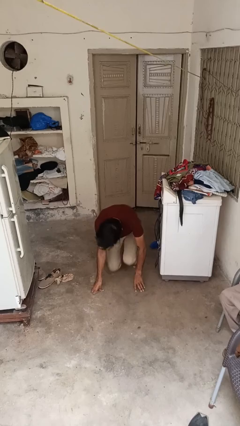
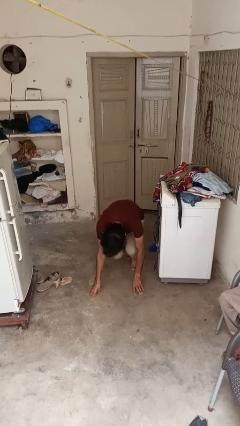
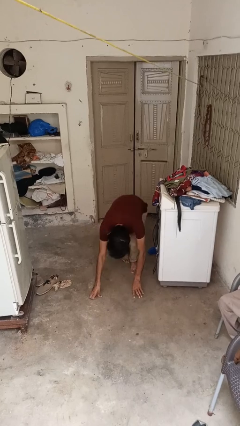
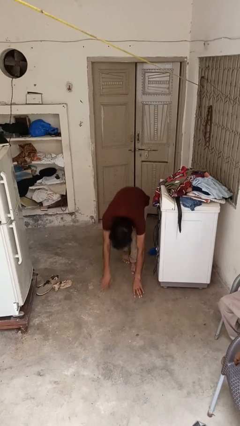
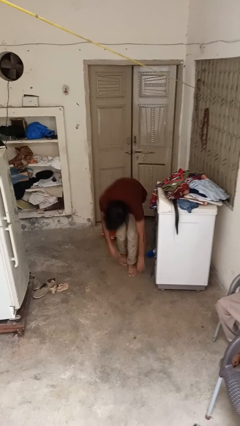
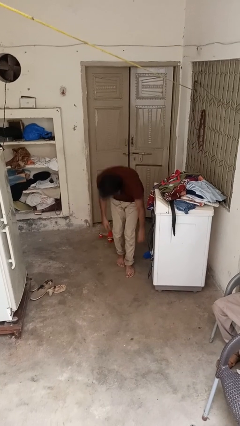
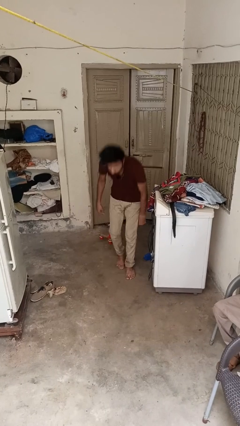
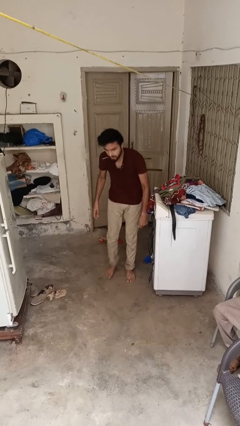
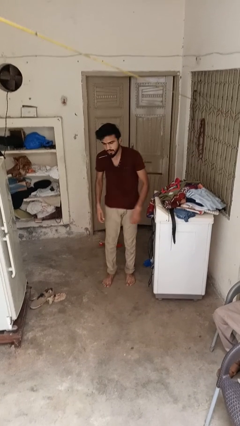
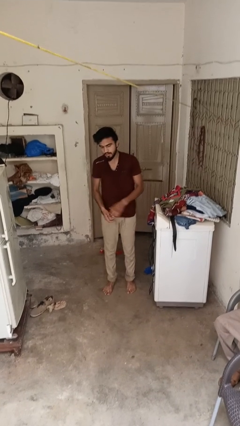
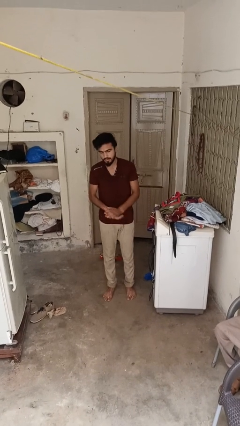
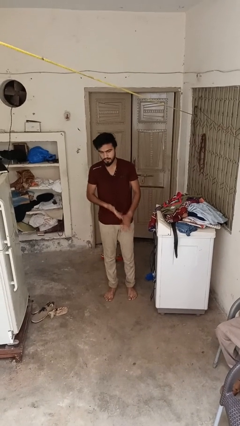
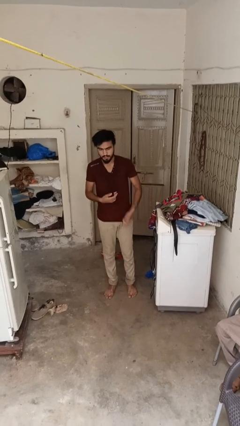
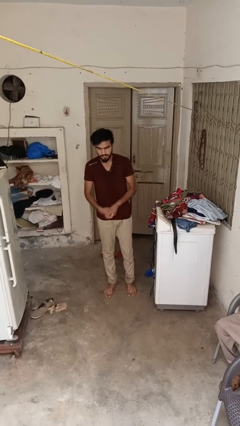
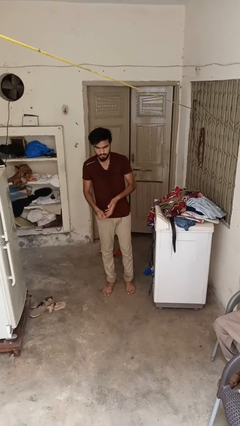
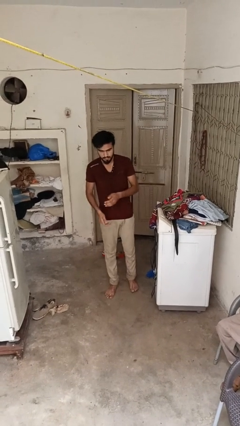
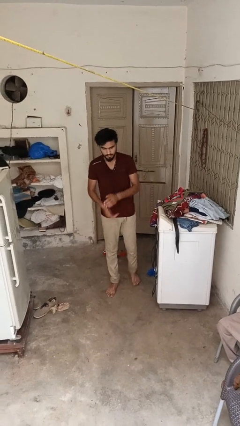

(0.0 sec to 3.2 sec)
person stands up from floor

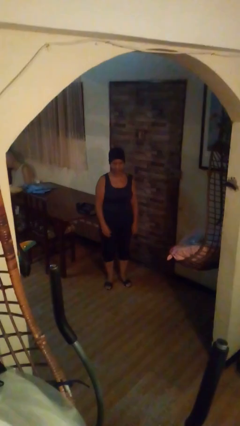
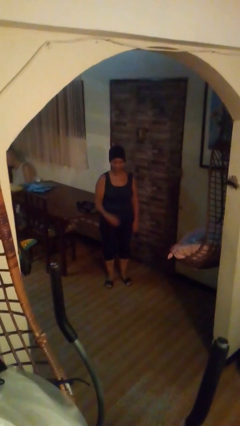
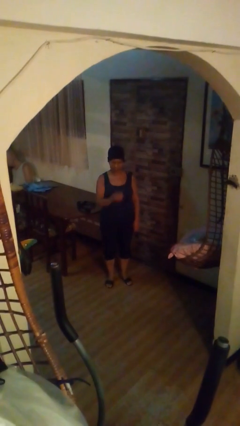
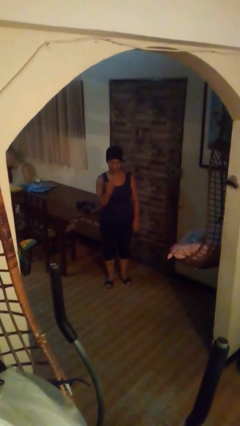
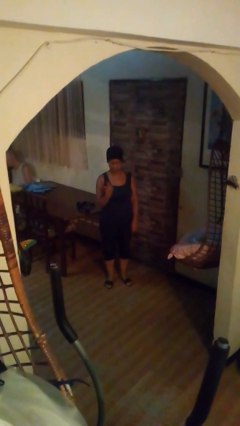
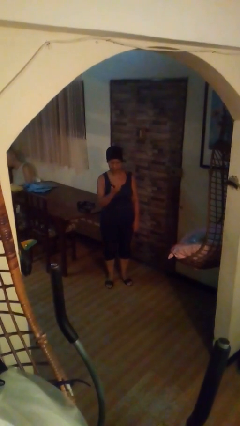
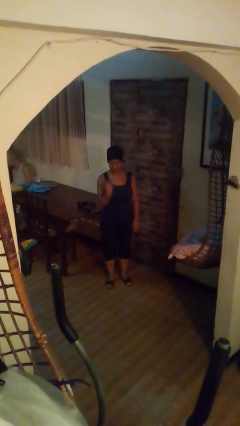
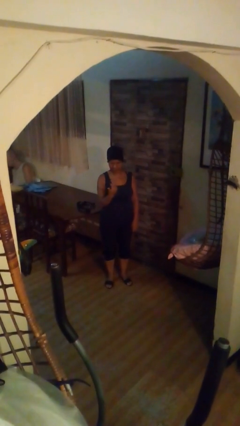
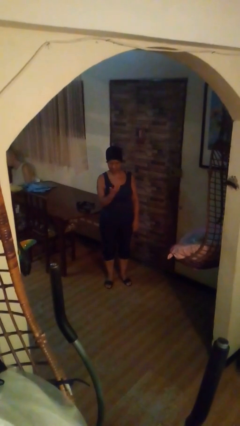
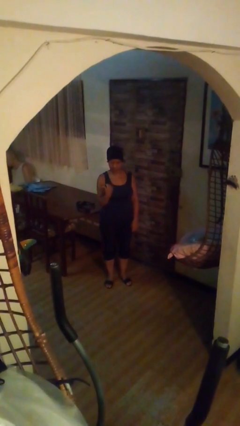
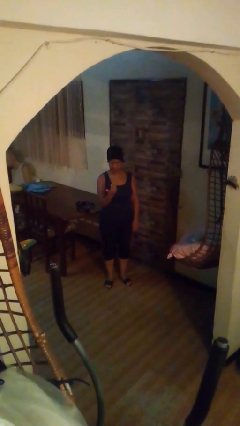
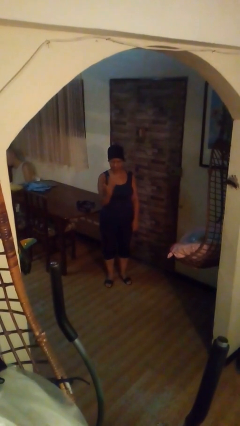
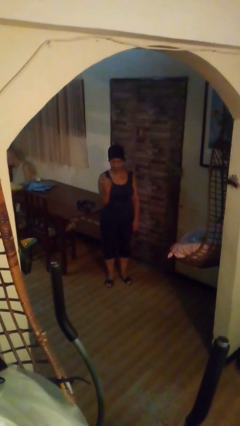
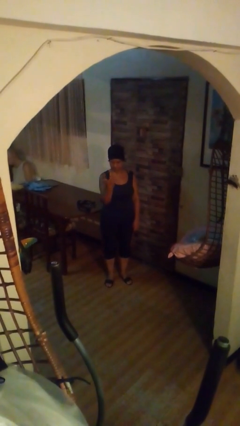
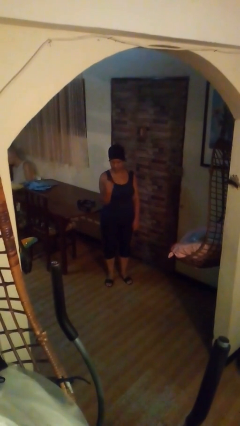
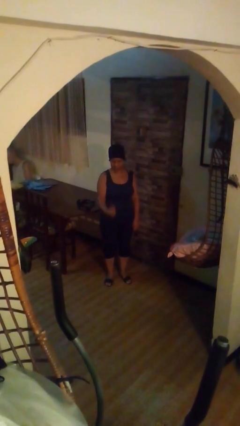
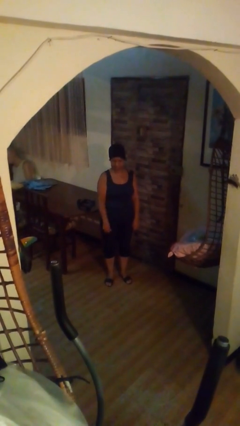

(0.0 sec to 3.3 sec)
person gestures come here

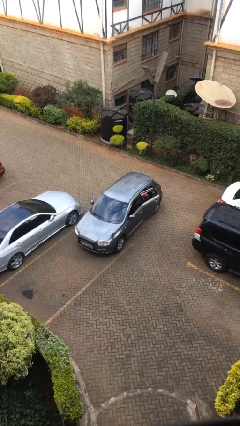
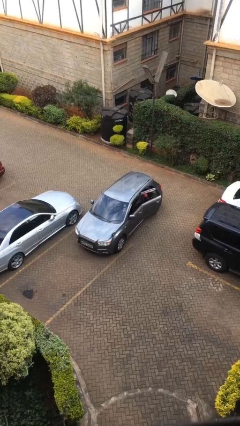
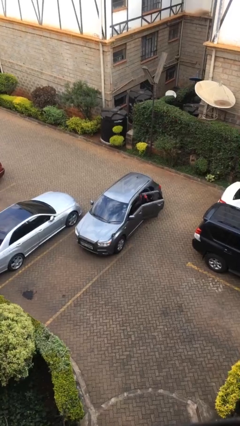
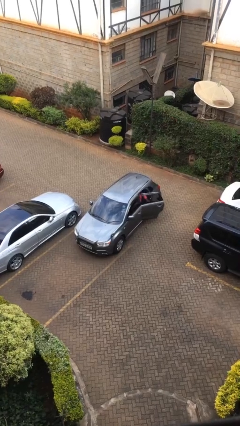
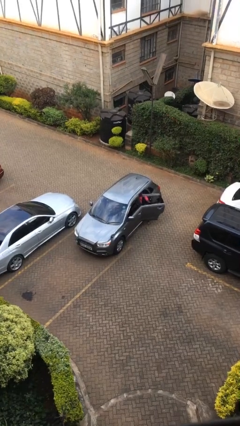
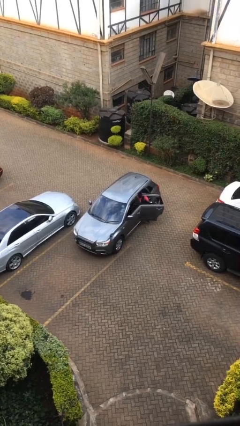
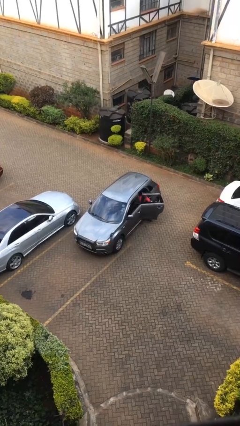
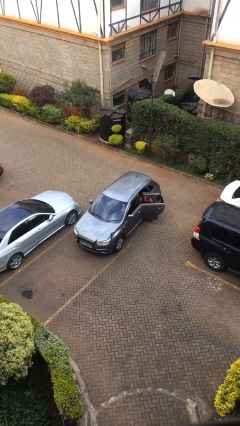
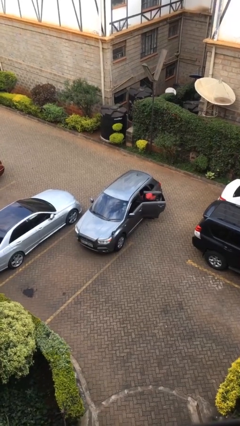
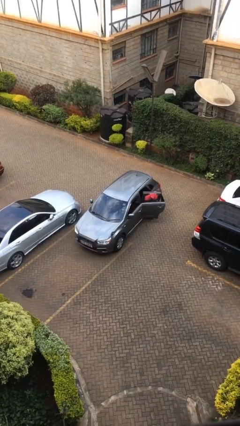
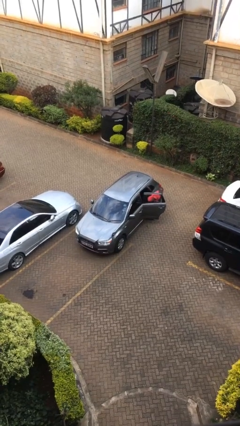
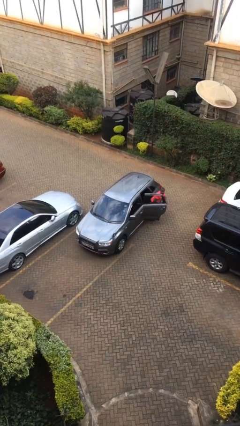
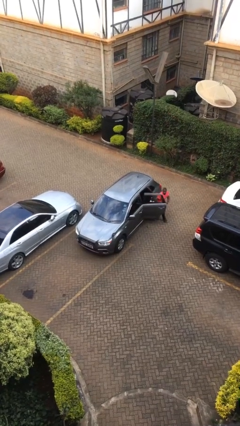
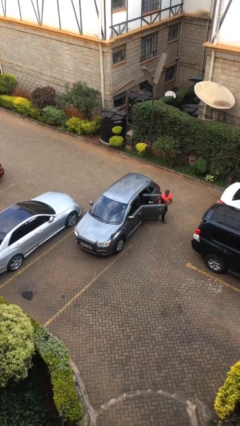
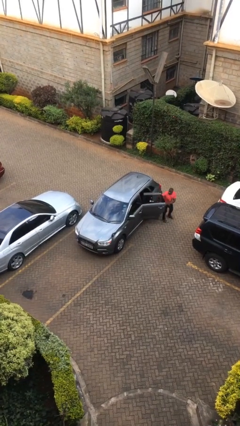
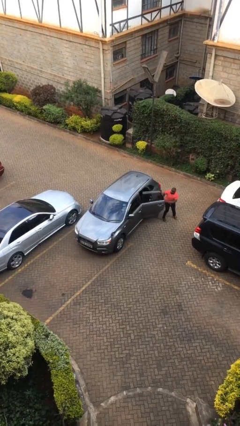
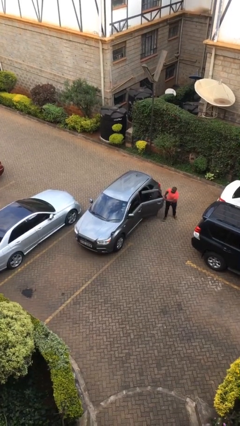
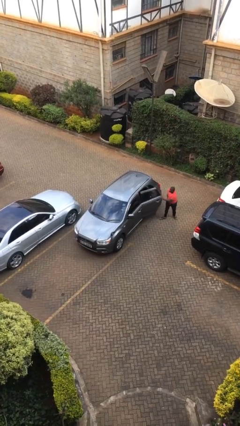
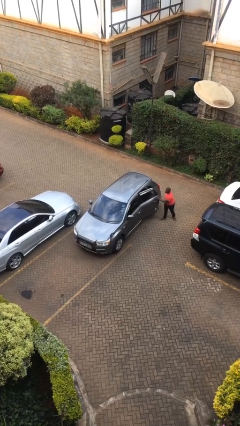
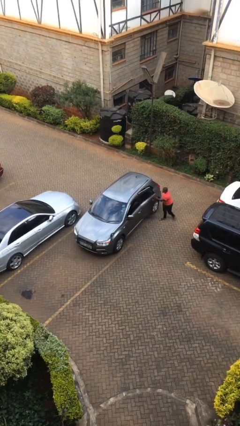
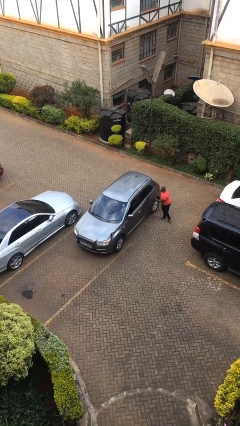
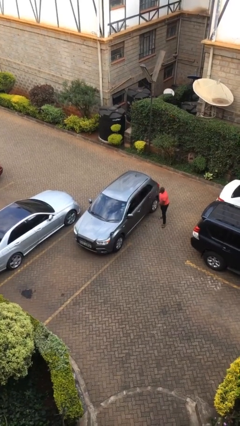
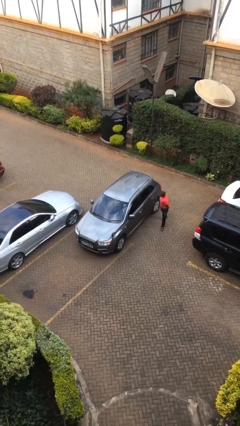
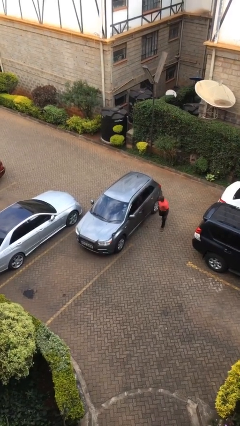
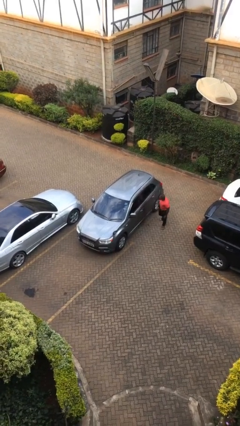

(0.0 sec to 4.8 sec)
car drops off person

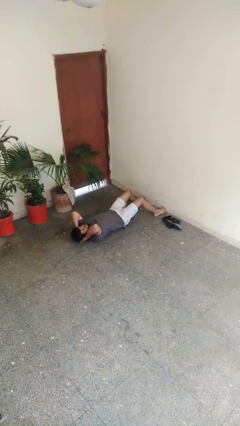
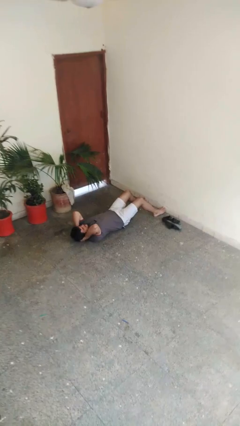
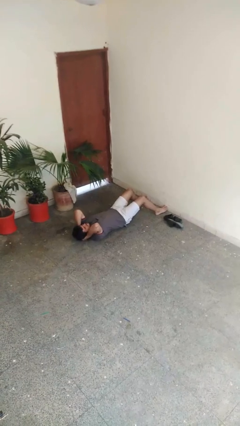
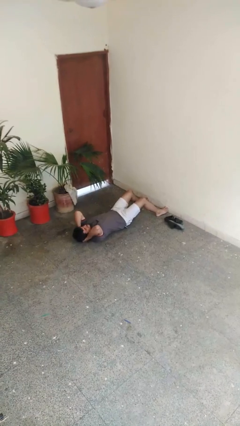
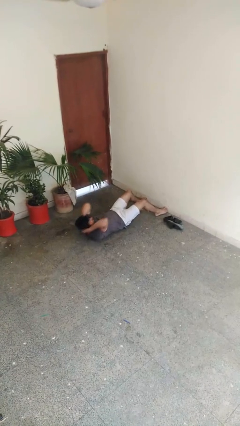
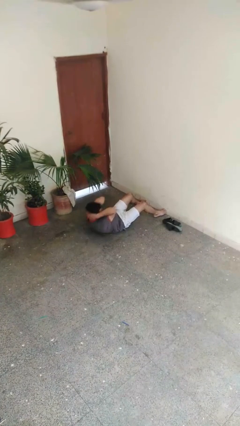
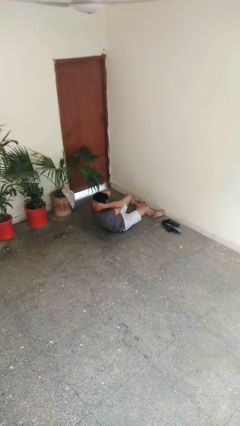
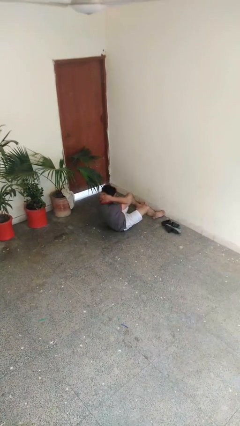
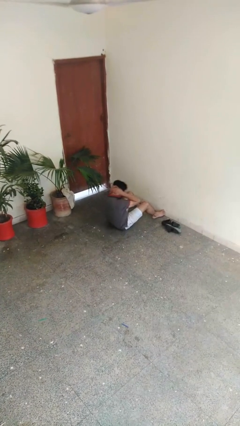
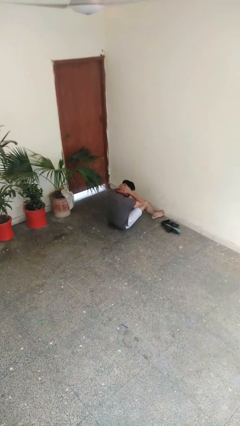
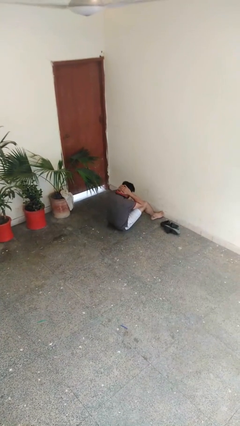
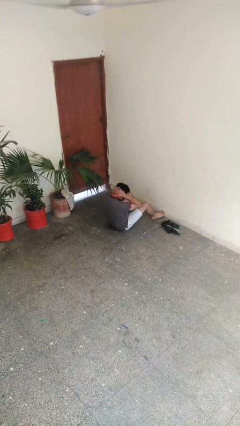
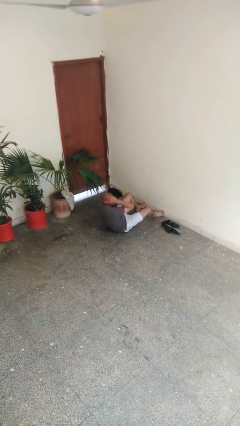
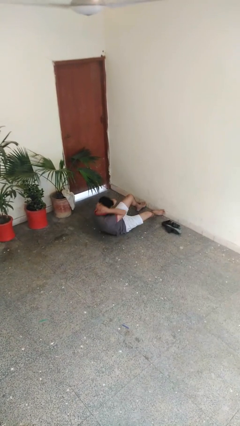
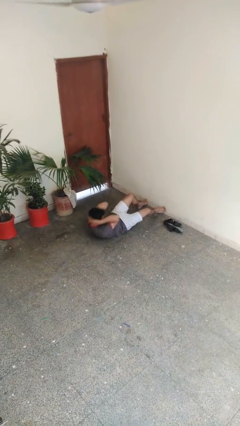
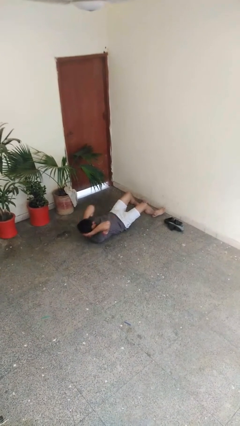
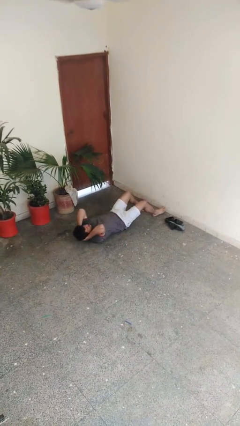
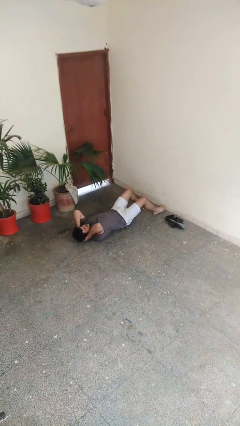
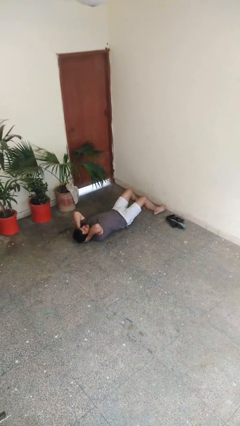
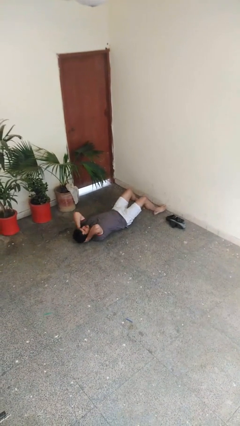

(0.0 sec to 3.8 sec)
person exercises with situp

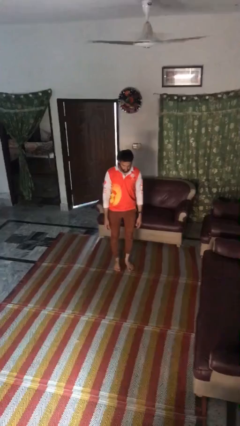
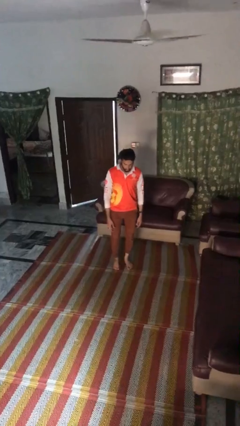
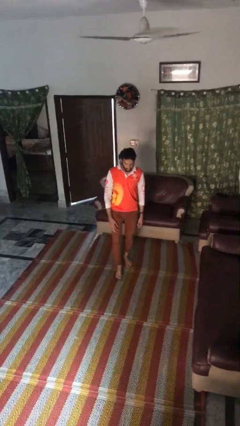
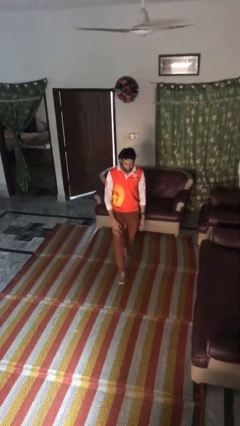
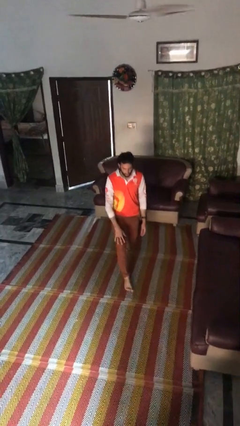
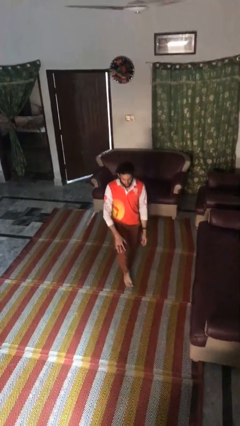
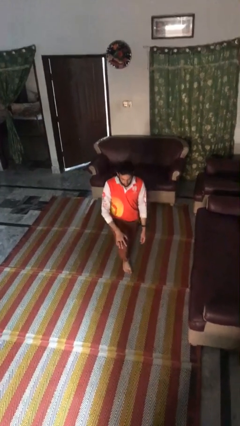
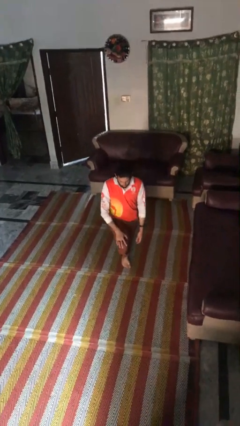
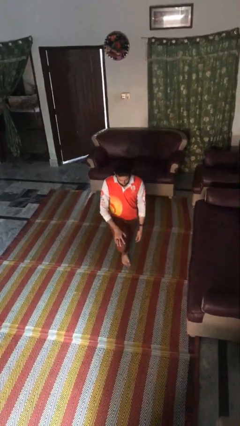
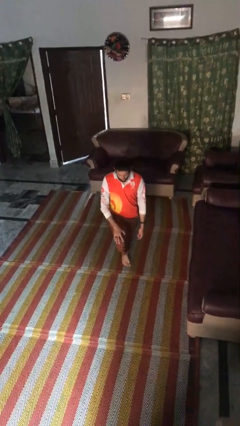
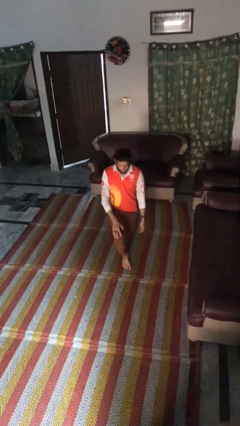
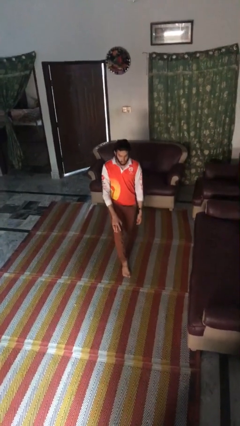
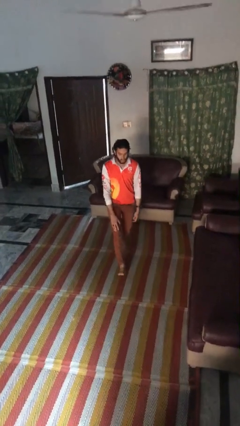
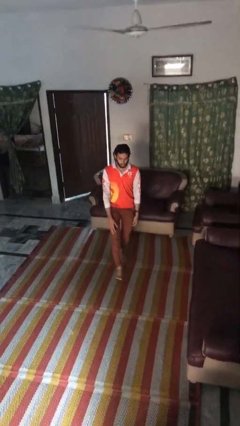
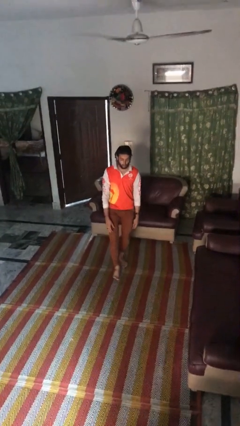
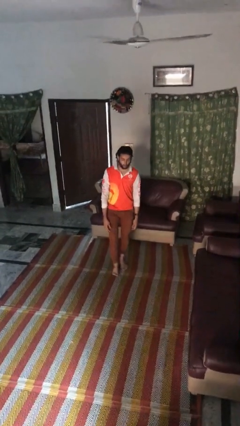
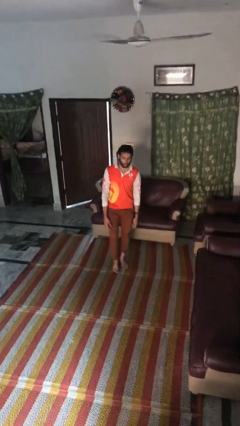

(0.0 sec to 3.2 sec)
person exercises with lunges
